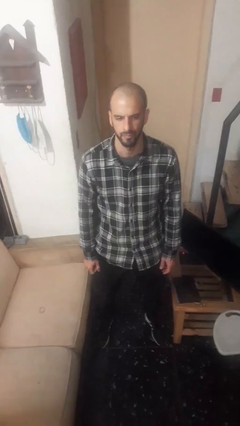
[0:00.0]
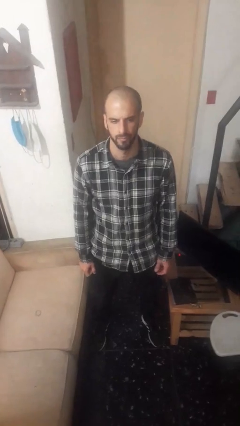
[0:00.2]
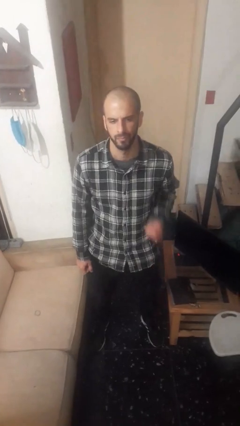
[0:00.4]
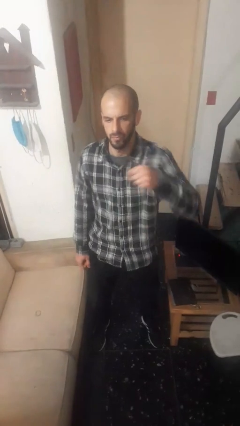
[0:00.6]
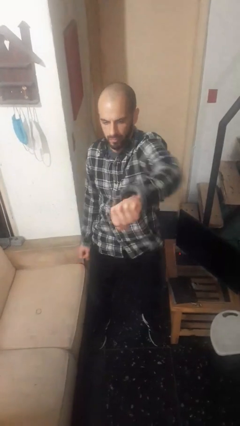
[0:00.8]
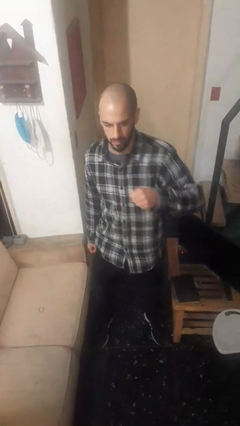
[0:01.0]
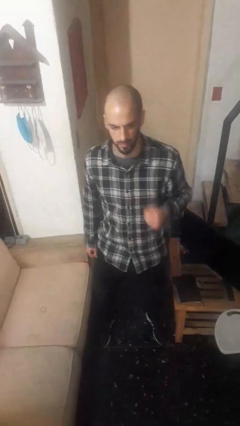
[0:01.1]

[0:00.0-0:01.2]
person punches

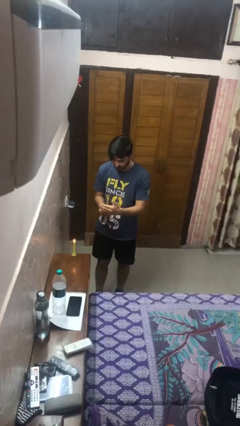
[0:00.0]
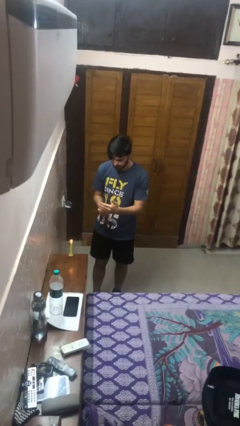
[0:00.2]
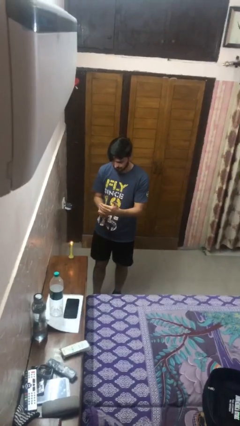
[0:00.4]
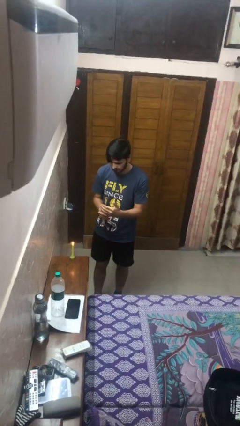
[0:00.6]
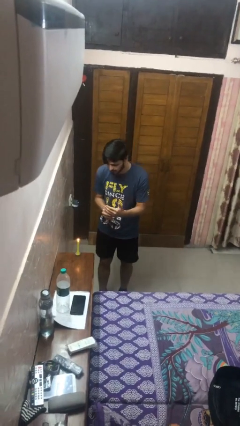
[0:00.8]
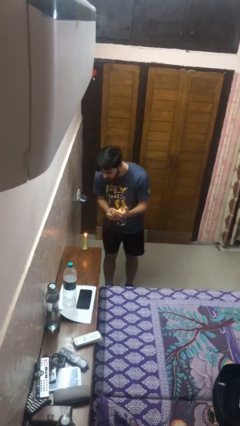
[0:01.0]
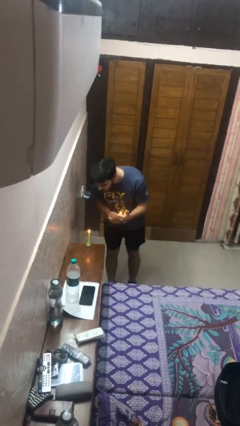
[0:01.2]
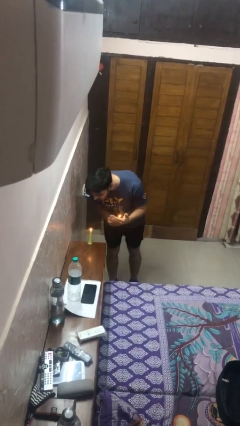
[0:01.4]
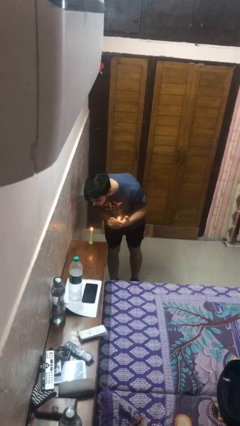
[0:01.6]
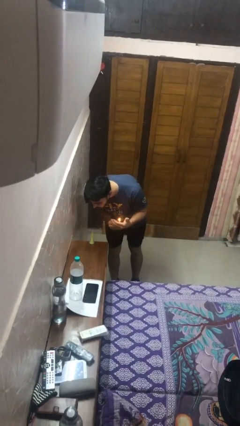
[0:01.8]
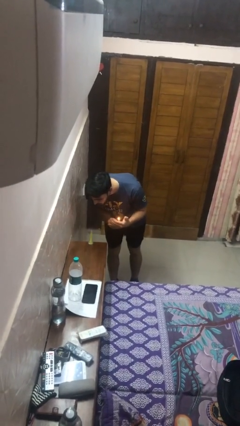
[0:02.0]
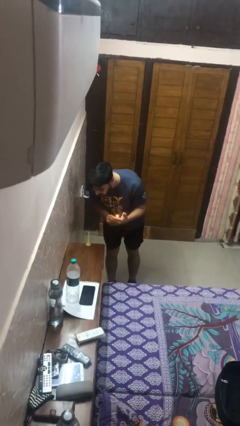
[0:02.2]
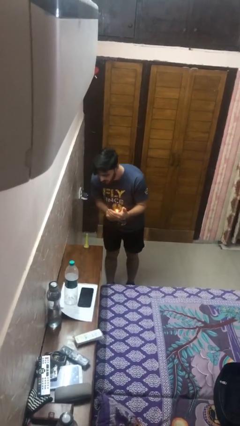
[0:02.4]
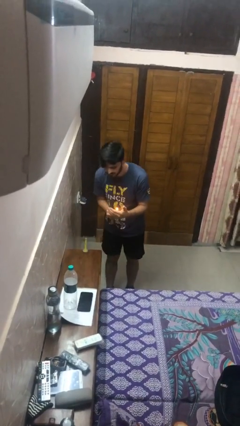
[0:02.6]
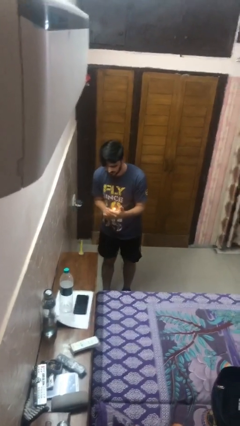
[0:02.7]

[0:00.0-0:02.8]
person extinguishes candle

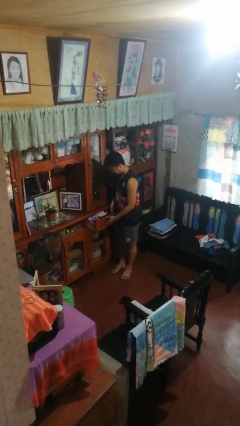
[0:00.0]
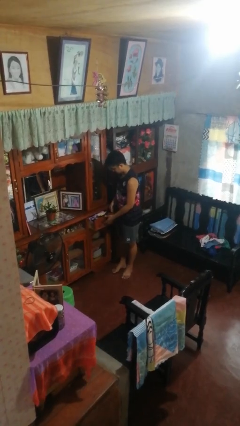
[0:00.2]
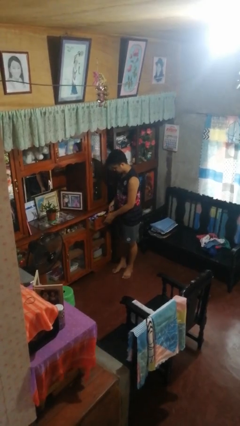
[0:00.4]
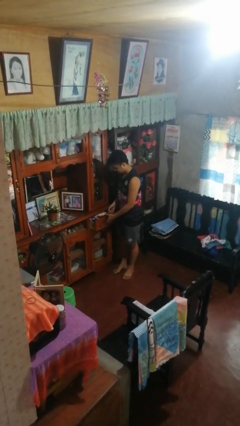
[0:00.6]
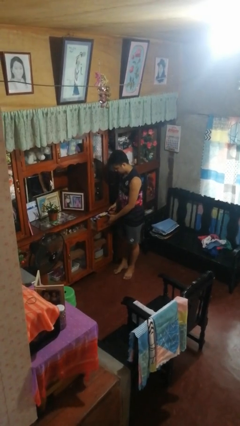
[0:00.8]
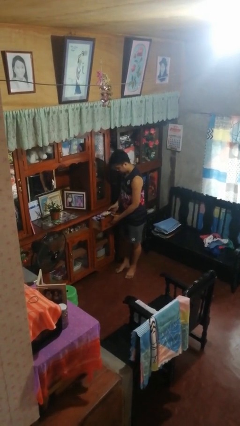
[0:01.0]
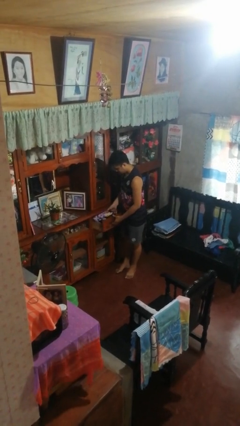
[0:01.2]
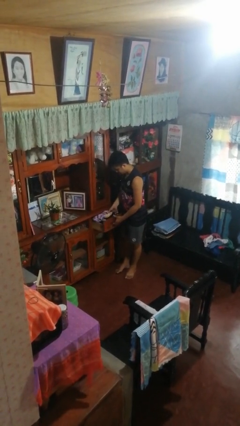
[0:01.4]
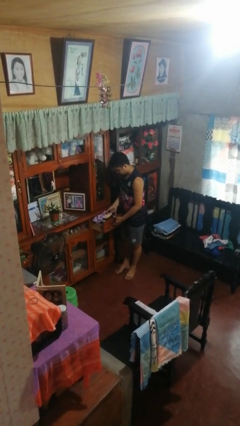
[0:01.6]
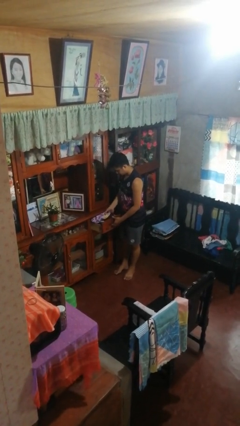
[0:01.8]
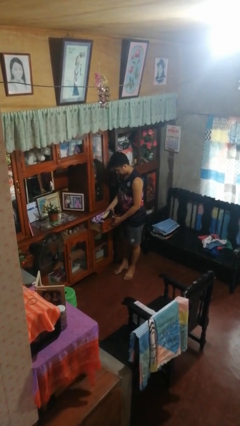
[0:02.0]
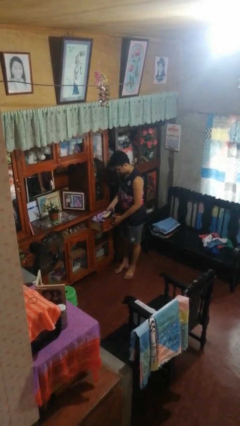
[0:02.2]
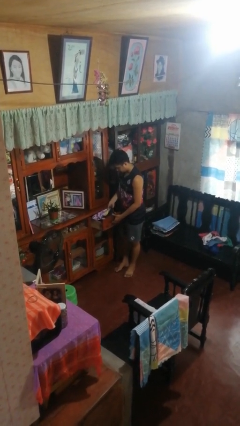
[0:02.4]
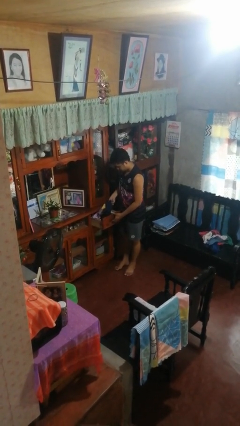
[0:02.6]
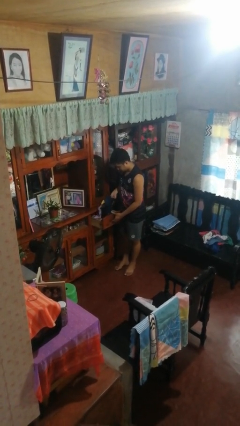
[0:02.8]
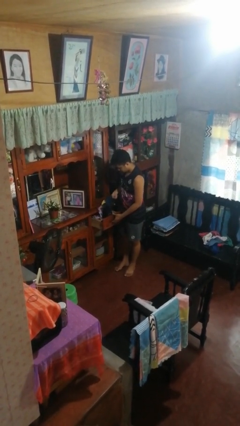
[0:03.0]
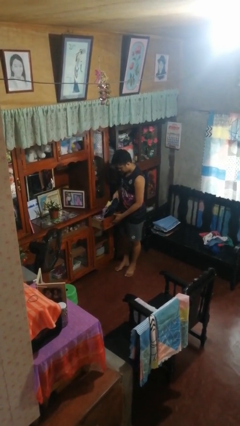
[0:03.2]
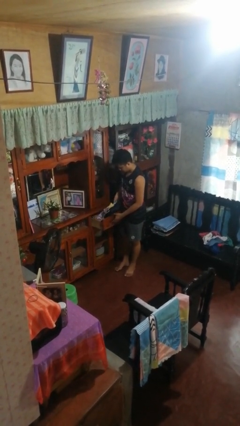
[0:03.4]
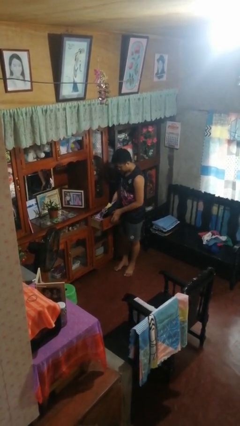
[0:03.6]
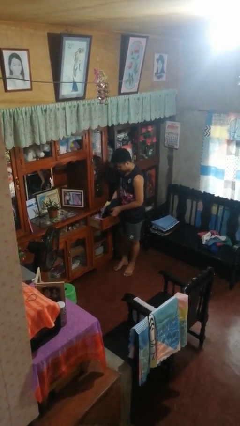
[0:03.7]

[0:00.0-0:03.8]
person takes clothes from dresser

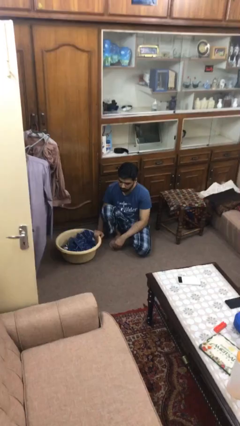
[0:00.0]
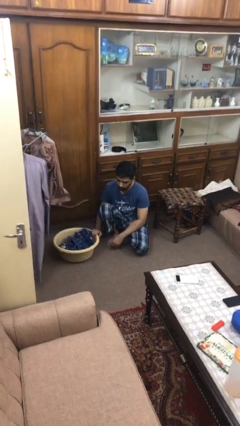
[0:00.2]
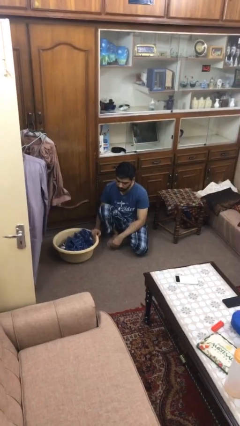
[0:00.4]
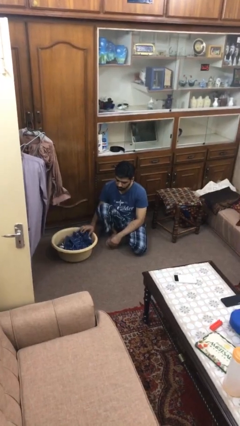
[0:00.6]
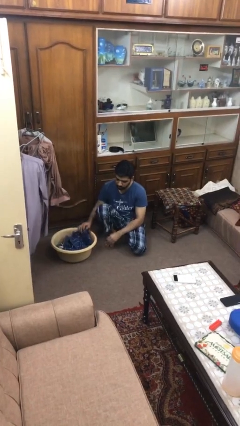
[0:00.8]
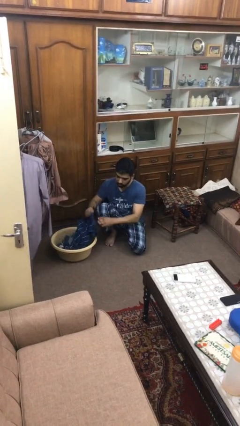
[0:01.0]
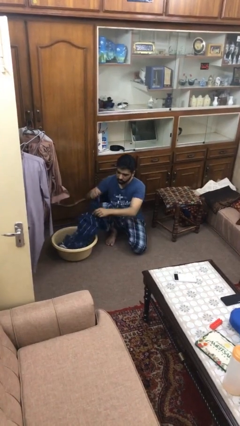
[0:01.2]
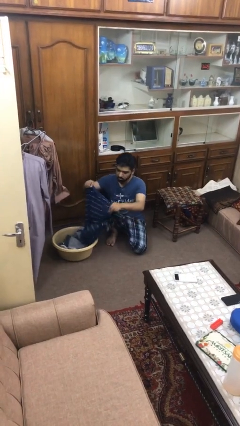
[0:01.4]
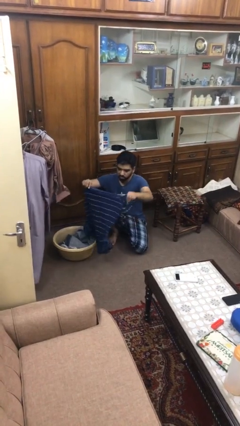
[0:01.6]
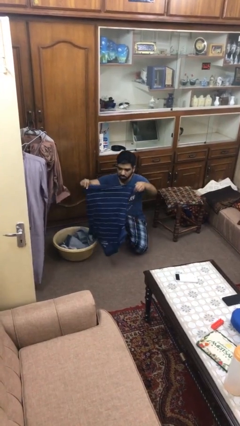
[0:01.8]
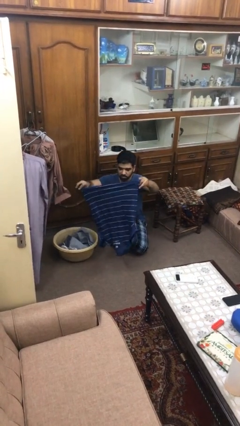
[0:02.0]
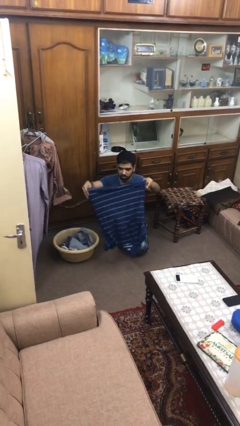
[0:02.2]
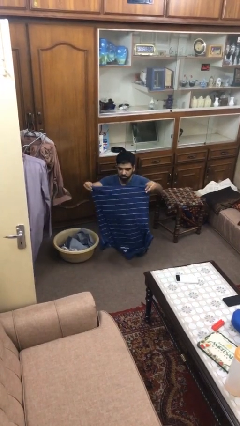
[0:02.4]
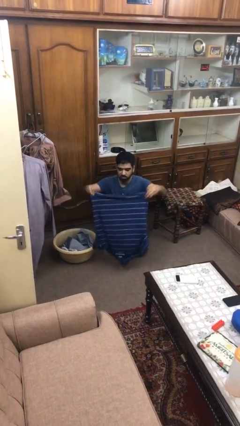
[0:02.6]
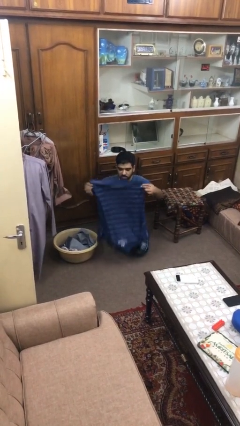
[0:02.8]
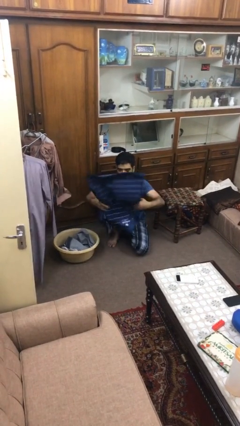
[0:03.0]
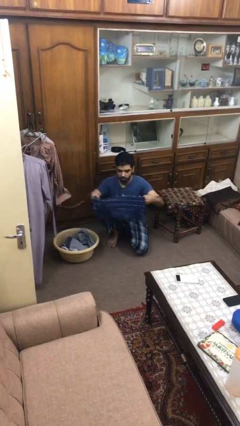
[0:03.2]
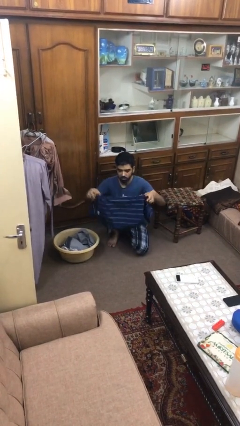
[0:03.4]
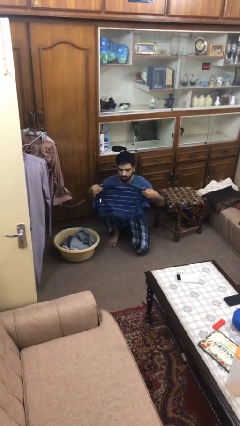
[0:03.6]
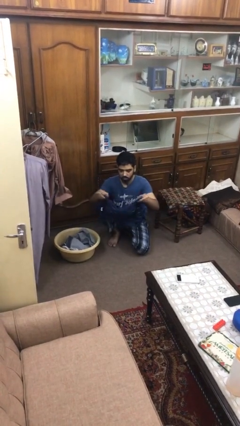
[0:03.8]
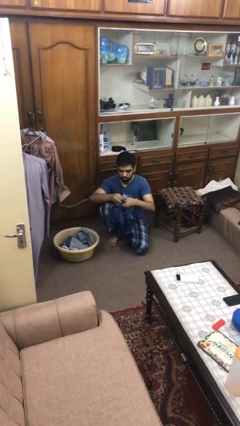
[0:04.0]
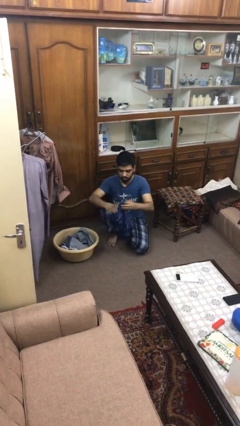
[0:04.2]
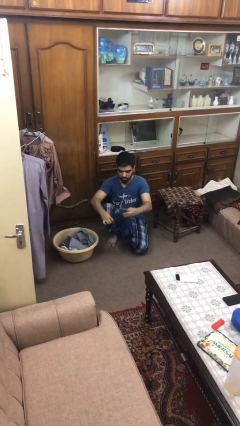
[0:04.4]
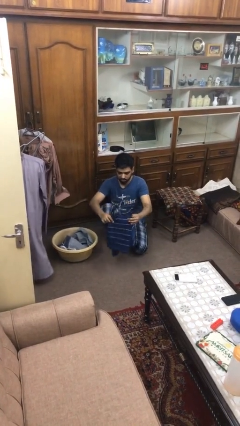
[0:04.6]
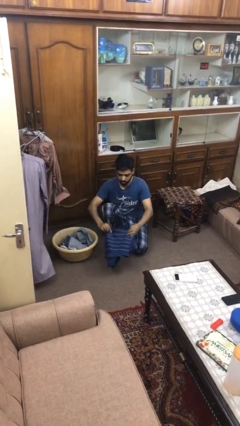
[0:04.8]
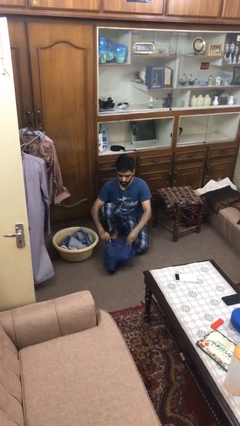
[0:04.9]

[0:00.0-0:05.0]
person folds shirt

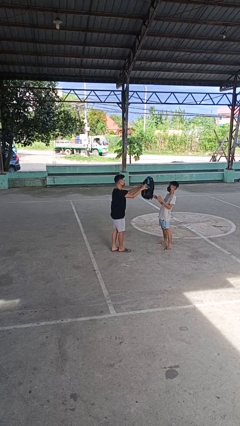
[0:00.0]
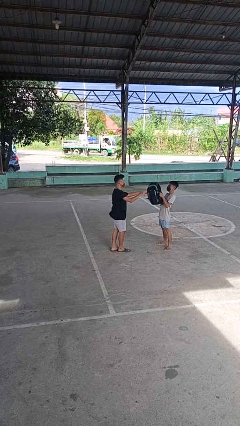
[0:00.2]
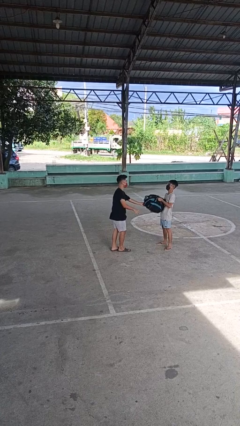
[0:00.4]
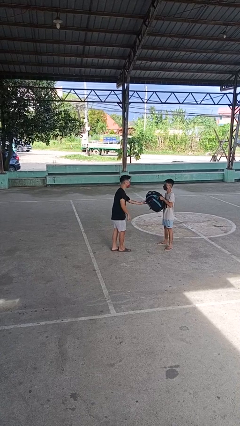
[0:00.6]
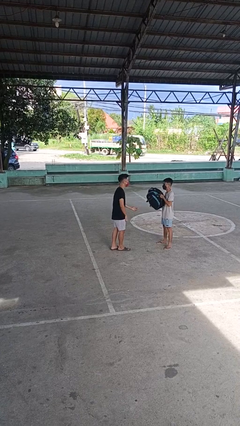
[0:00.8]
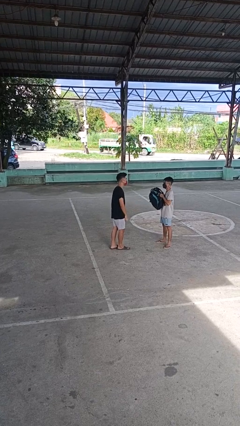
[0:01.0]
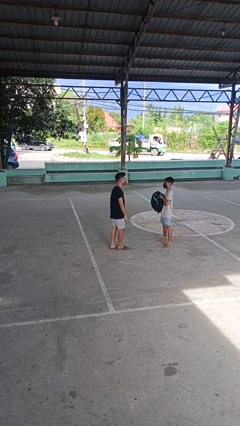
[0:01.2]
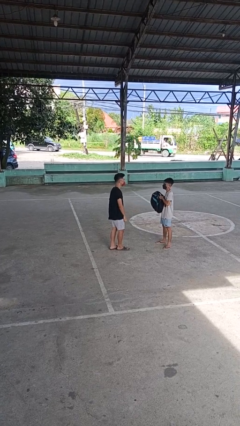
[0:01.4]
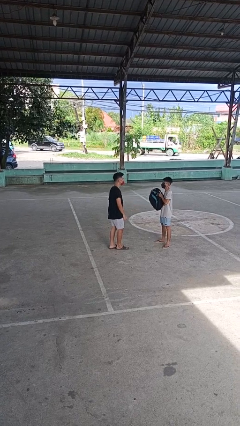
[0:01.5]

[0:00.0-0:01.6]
person throws object to person

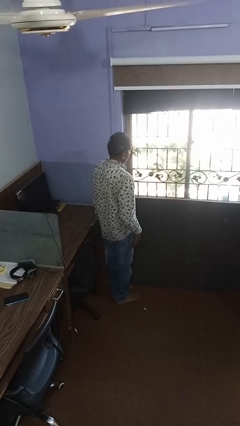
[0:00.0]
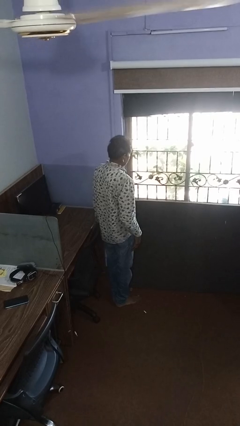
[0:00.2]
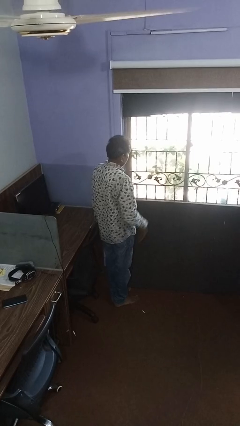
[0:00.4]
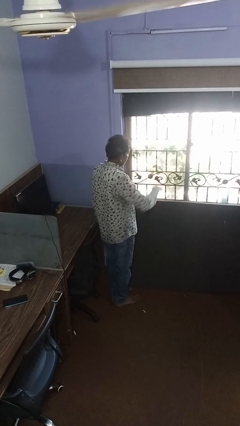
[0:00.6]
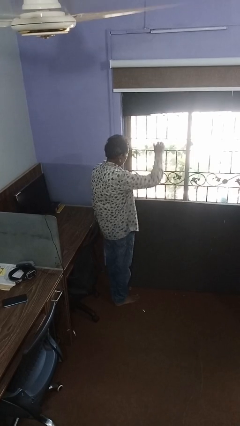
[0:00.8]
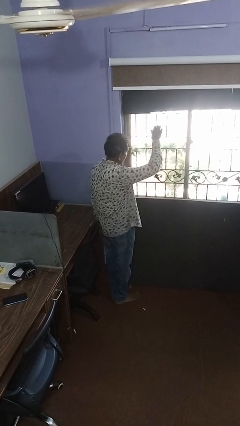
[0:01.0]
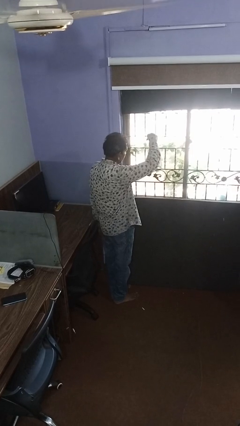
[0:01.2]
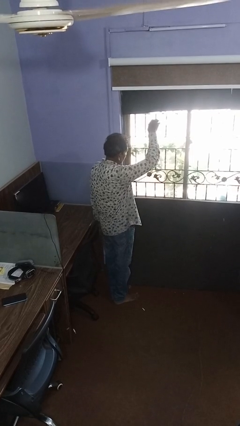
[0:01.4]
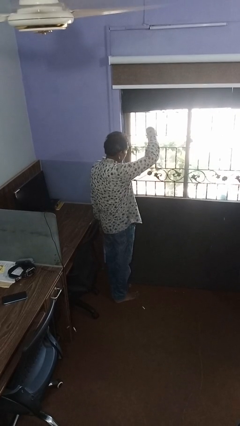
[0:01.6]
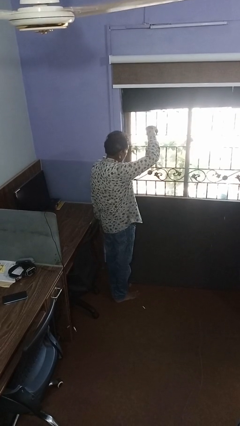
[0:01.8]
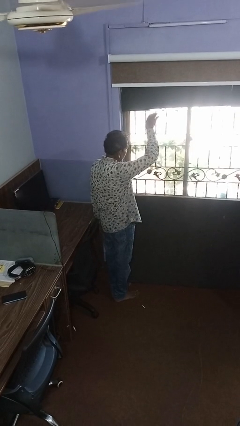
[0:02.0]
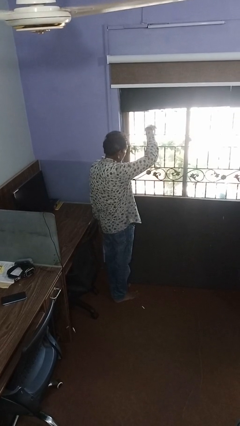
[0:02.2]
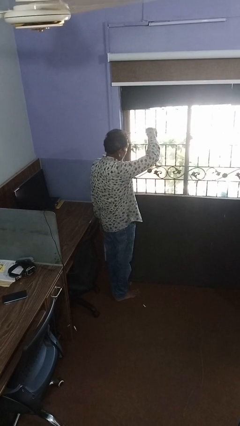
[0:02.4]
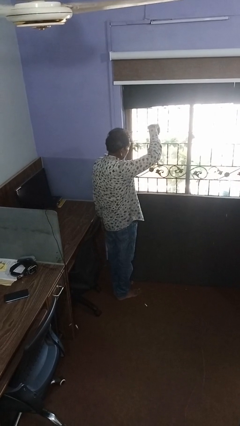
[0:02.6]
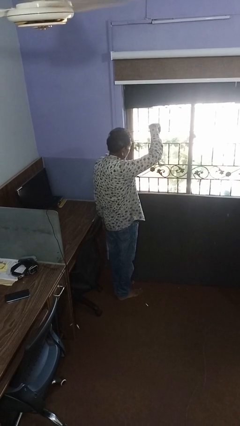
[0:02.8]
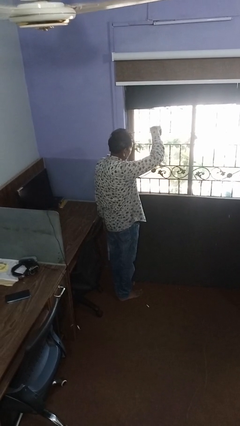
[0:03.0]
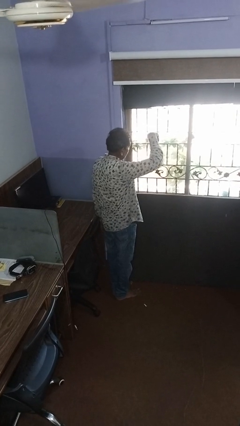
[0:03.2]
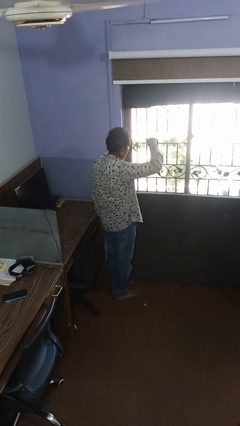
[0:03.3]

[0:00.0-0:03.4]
person gestures come here
